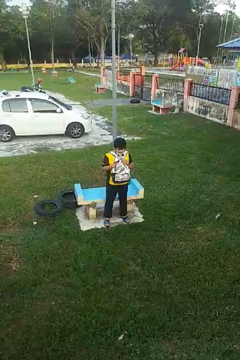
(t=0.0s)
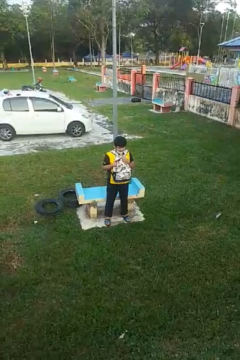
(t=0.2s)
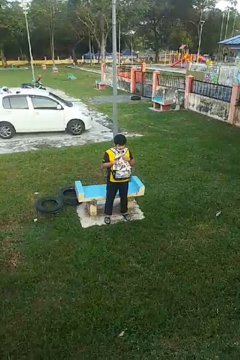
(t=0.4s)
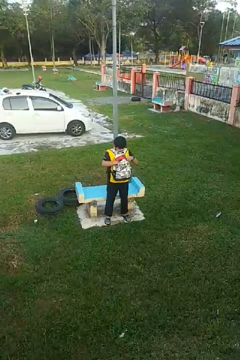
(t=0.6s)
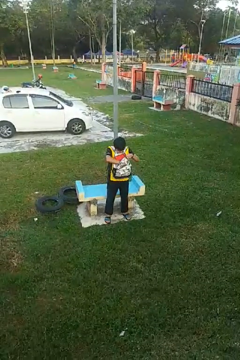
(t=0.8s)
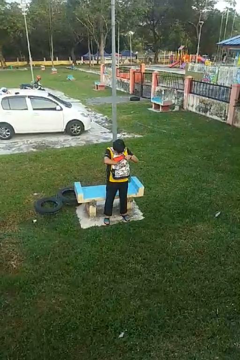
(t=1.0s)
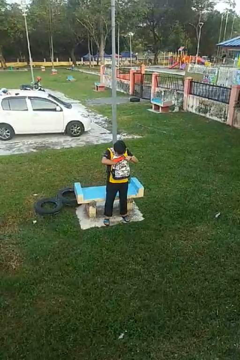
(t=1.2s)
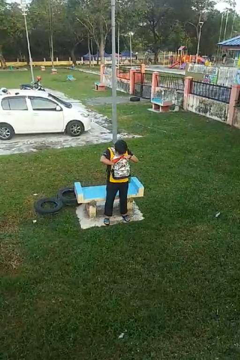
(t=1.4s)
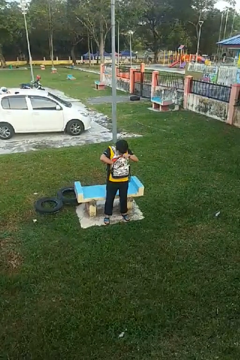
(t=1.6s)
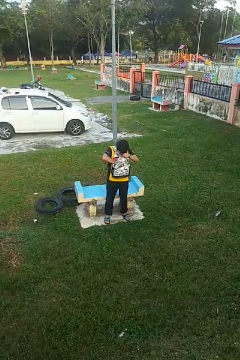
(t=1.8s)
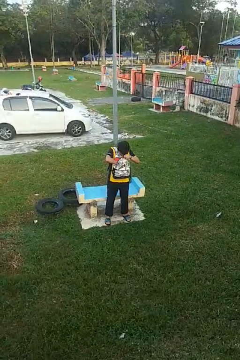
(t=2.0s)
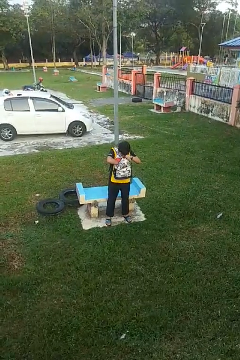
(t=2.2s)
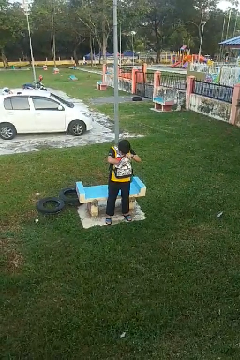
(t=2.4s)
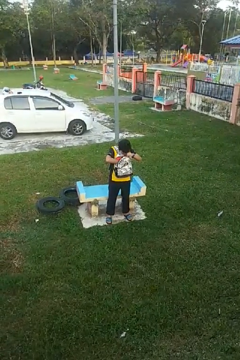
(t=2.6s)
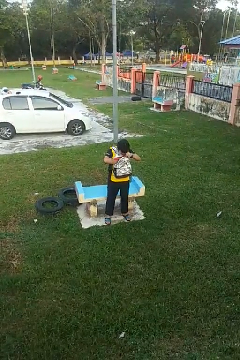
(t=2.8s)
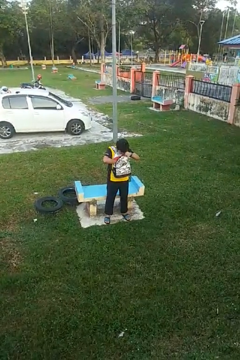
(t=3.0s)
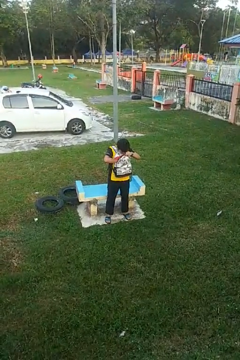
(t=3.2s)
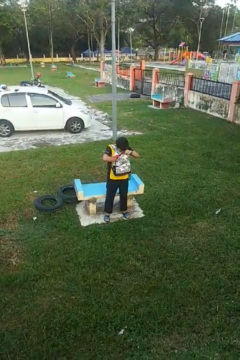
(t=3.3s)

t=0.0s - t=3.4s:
person searches in backpack

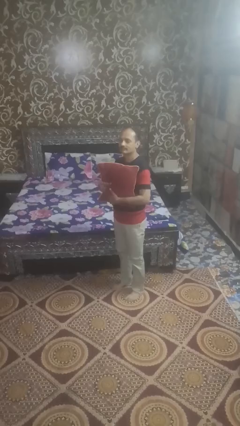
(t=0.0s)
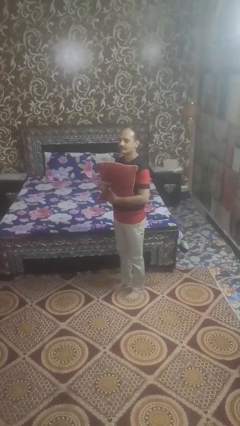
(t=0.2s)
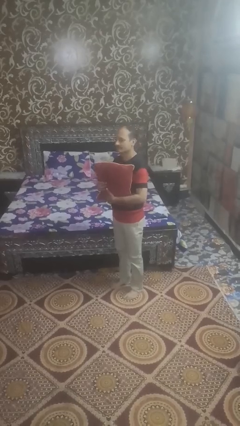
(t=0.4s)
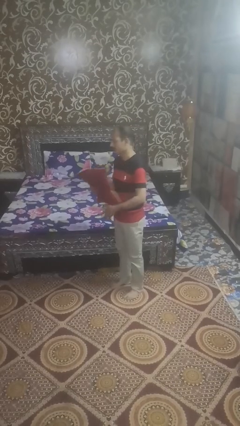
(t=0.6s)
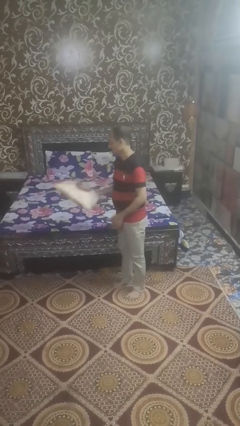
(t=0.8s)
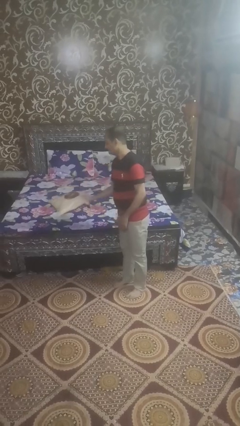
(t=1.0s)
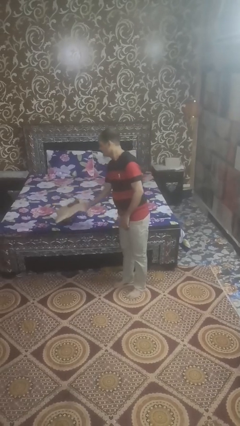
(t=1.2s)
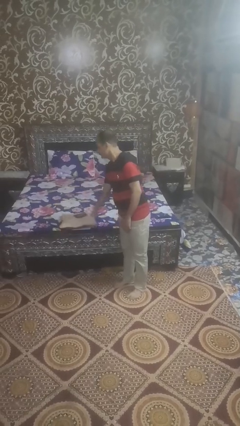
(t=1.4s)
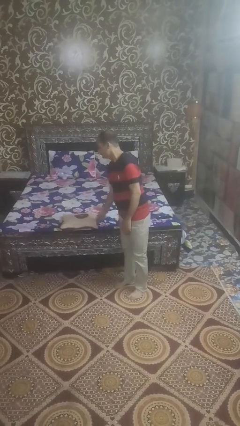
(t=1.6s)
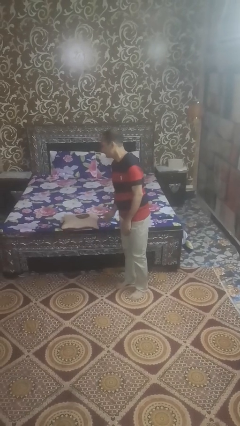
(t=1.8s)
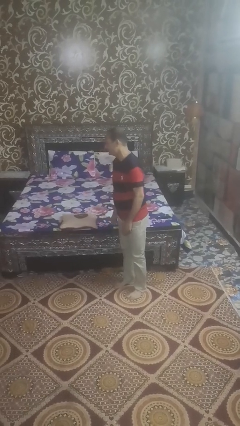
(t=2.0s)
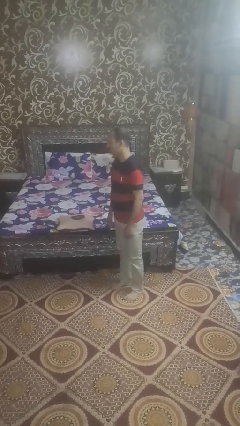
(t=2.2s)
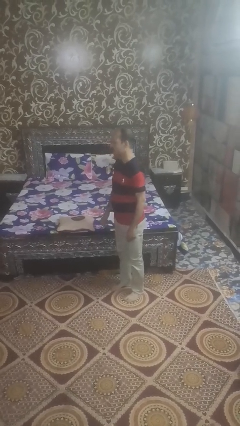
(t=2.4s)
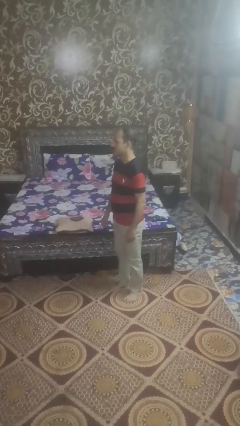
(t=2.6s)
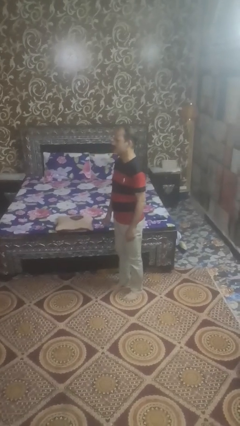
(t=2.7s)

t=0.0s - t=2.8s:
person puts down object on bed

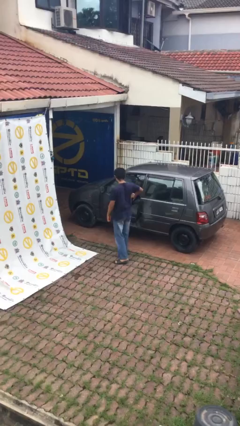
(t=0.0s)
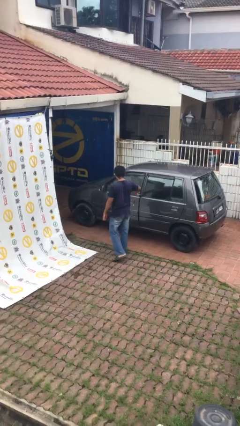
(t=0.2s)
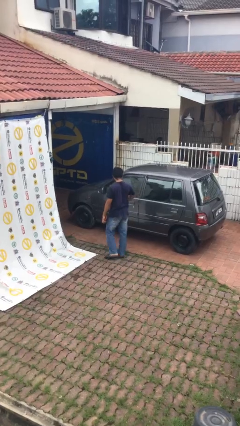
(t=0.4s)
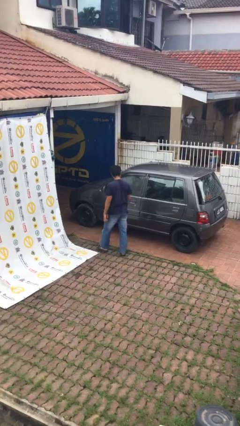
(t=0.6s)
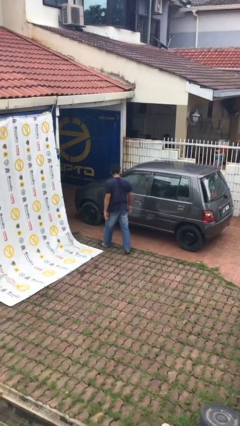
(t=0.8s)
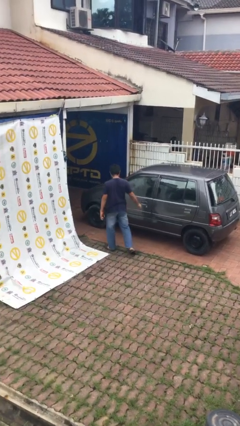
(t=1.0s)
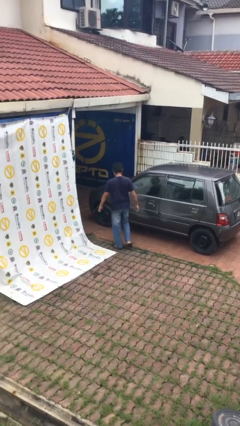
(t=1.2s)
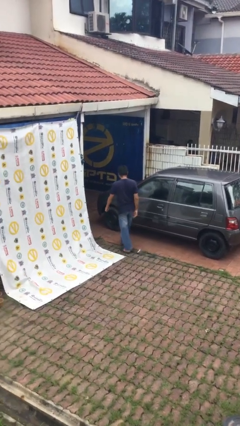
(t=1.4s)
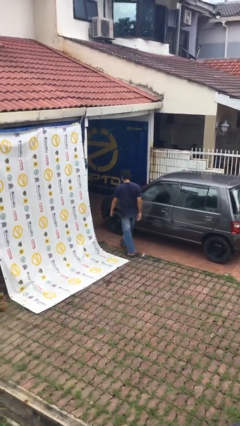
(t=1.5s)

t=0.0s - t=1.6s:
person closes car door

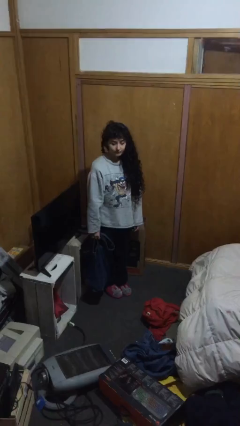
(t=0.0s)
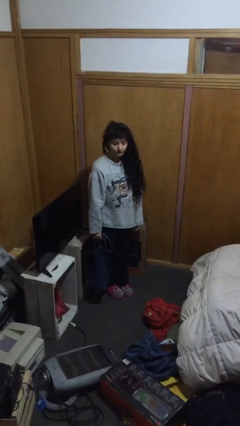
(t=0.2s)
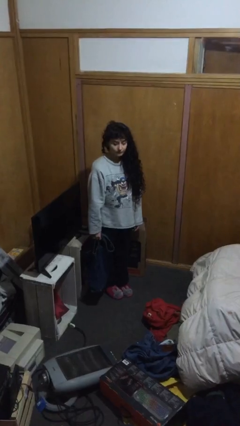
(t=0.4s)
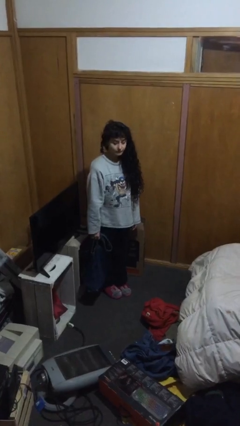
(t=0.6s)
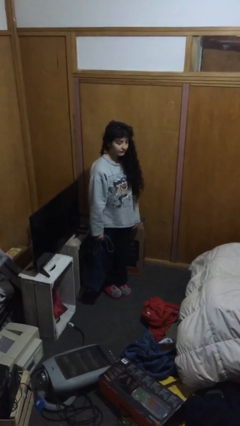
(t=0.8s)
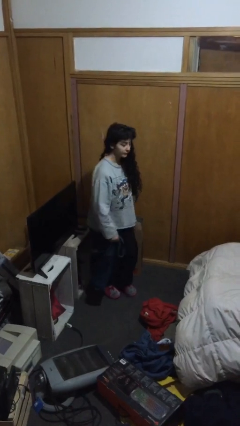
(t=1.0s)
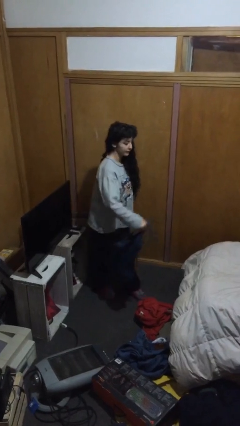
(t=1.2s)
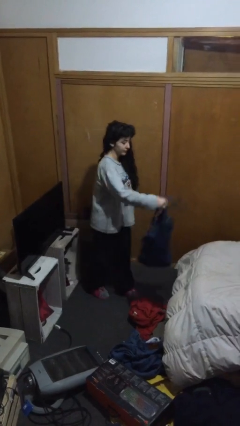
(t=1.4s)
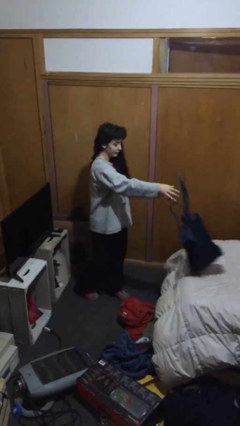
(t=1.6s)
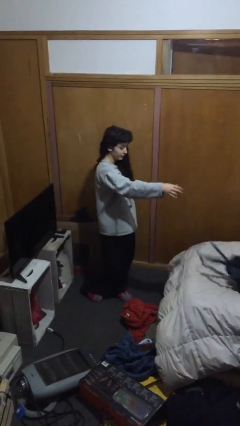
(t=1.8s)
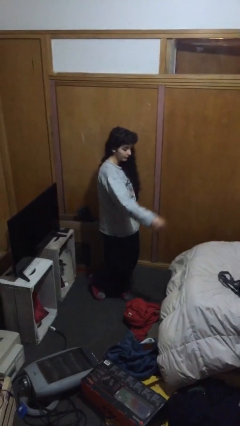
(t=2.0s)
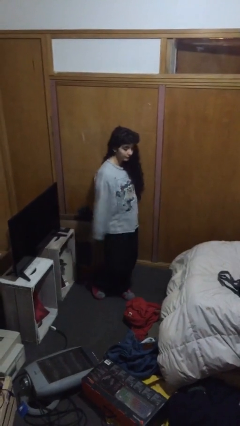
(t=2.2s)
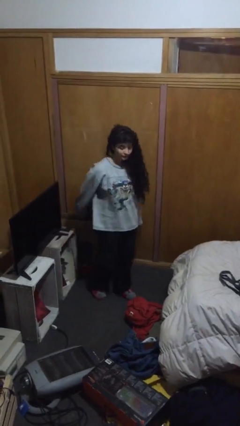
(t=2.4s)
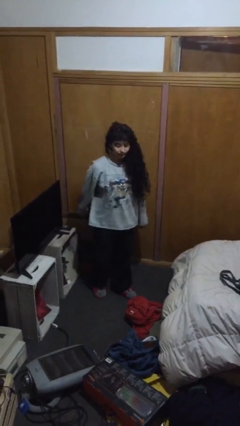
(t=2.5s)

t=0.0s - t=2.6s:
person throws object on bed

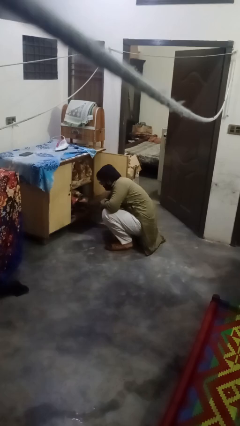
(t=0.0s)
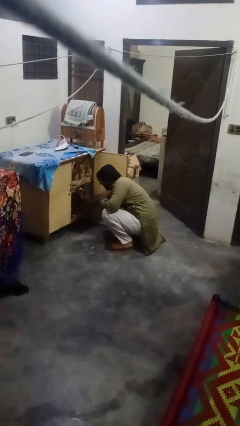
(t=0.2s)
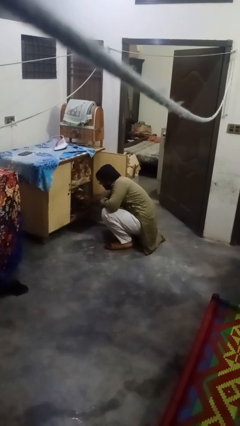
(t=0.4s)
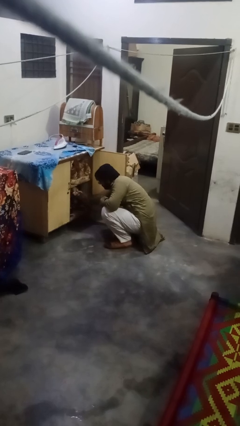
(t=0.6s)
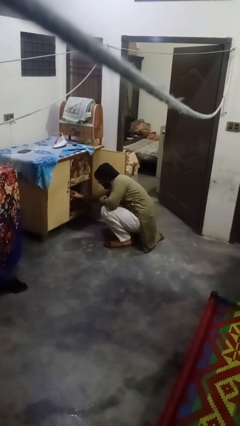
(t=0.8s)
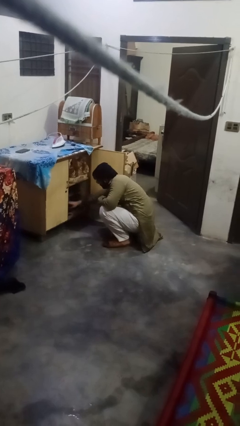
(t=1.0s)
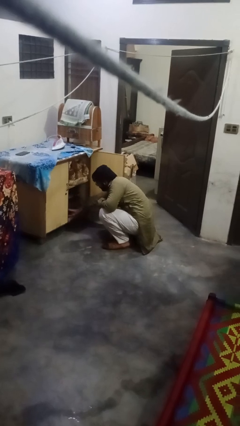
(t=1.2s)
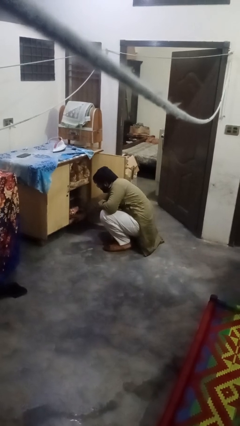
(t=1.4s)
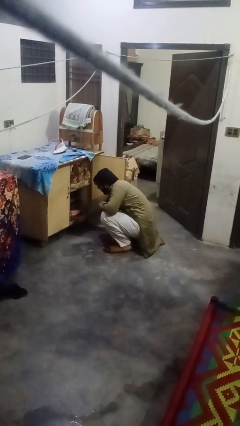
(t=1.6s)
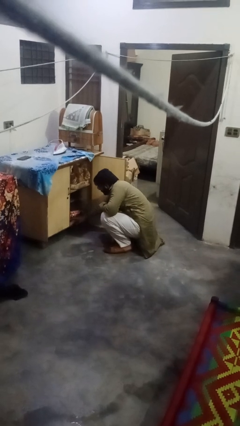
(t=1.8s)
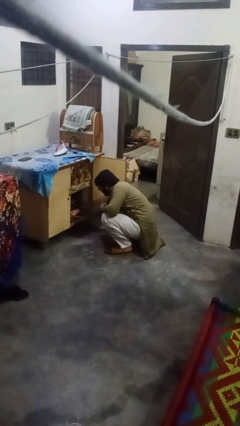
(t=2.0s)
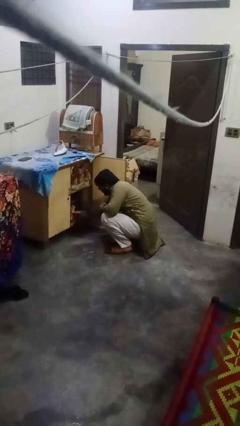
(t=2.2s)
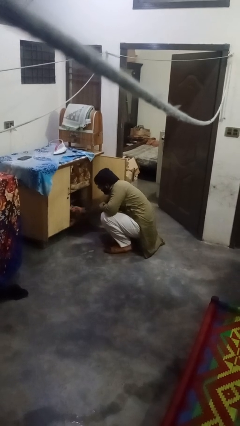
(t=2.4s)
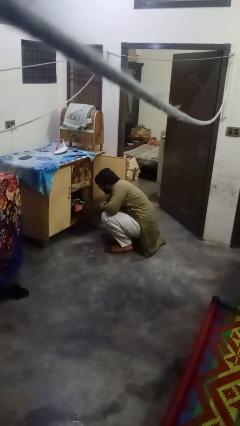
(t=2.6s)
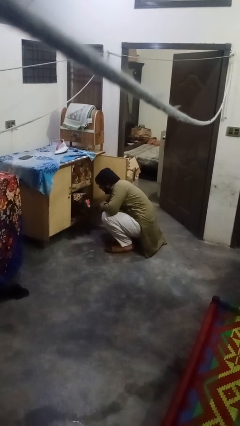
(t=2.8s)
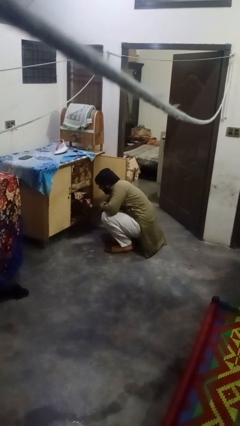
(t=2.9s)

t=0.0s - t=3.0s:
person searches in cabinet

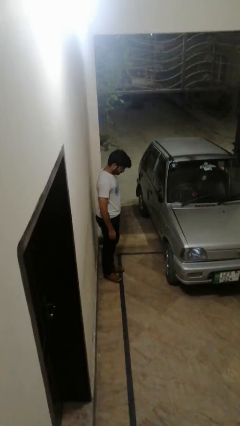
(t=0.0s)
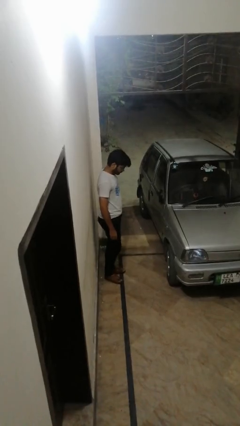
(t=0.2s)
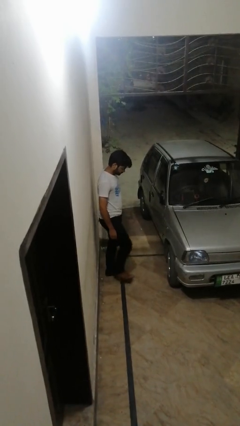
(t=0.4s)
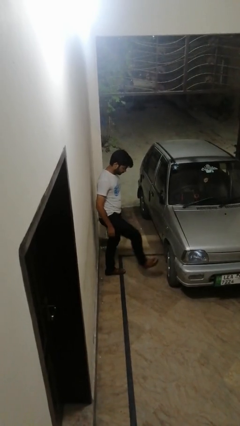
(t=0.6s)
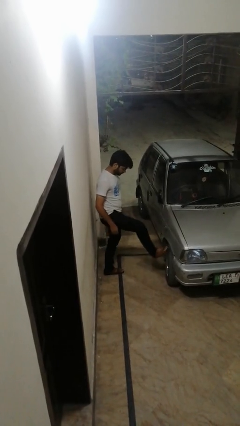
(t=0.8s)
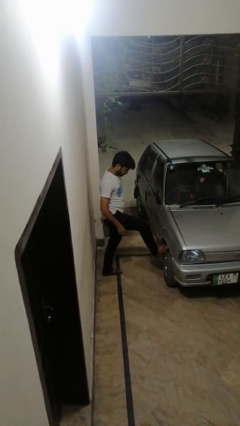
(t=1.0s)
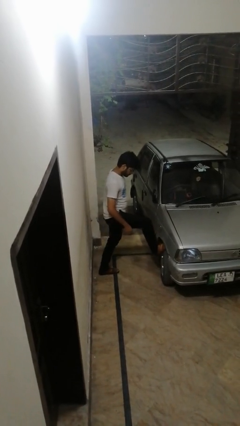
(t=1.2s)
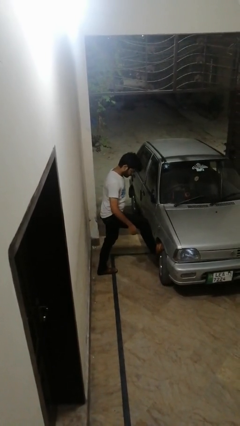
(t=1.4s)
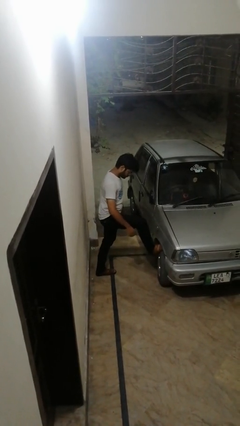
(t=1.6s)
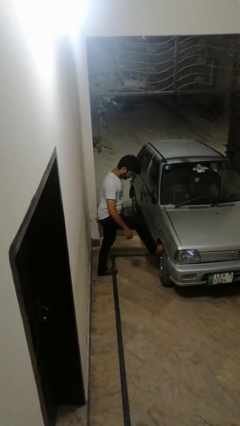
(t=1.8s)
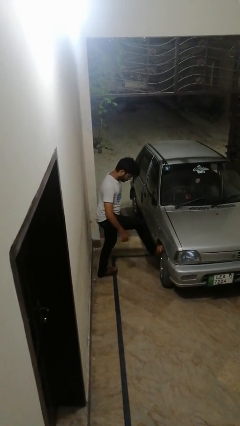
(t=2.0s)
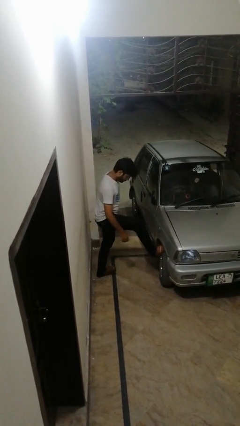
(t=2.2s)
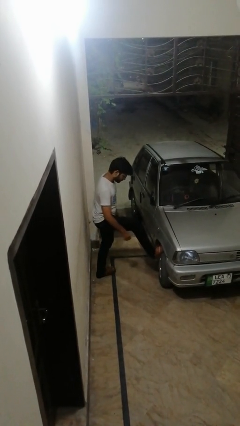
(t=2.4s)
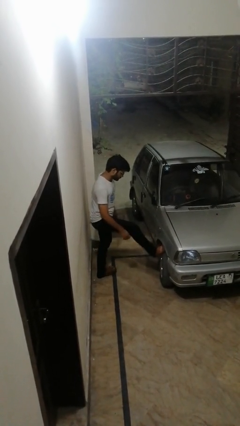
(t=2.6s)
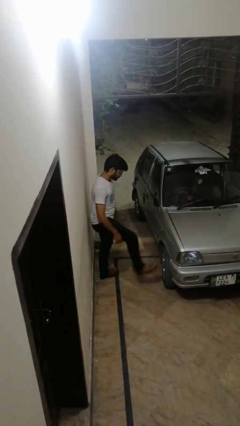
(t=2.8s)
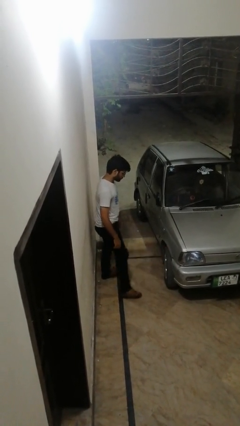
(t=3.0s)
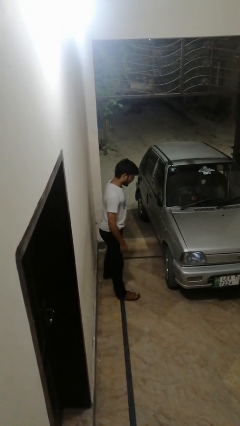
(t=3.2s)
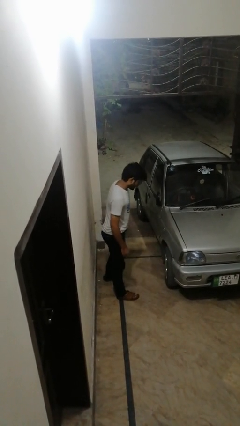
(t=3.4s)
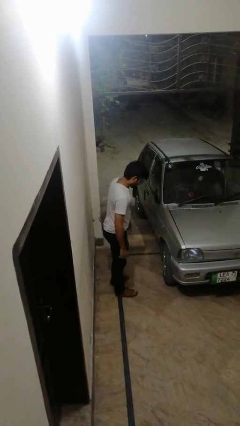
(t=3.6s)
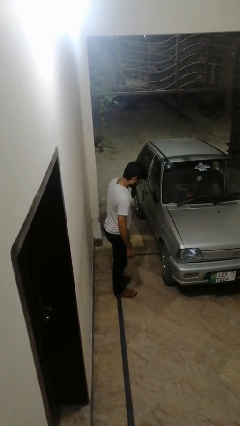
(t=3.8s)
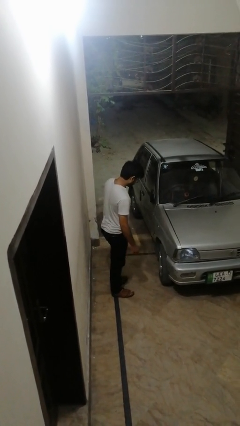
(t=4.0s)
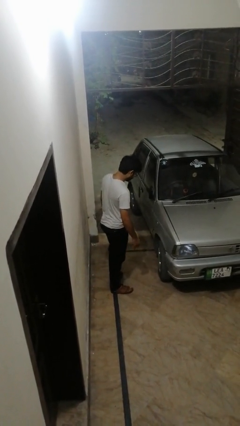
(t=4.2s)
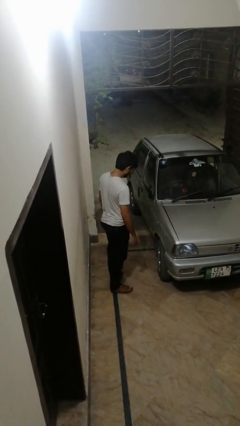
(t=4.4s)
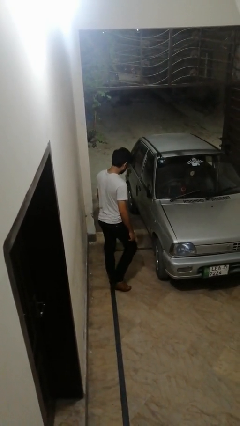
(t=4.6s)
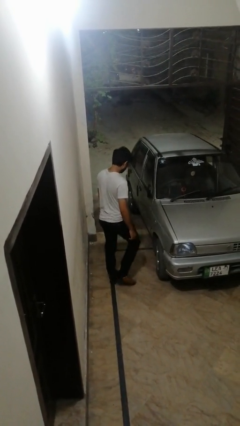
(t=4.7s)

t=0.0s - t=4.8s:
person kicks car tires
